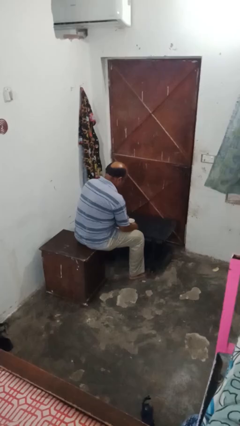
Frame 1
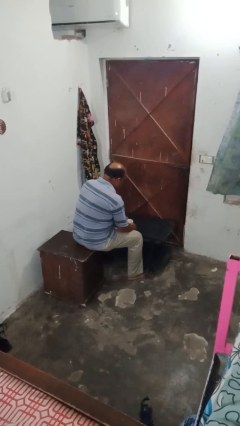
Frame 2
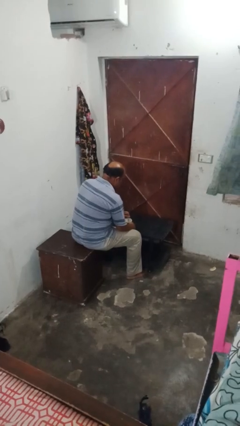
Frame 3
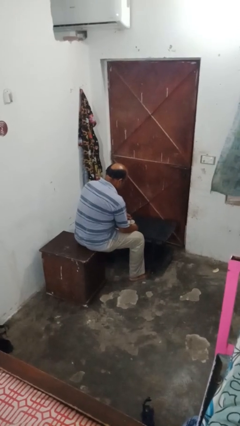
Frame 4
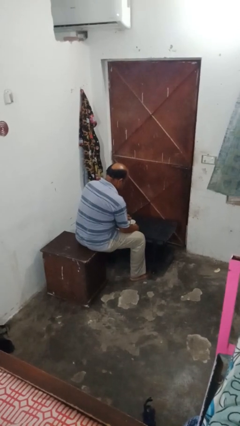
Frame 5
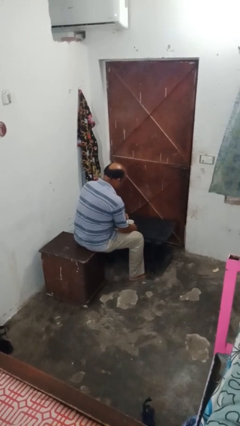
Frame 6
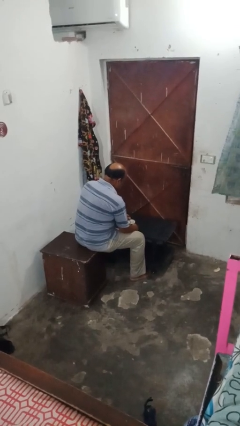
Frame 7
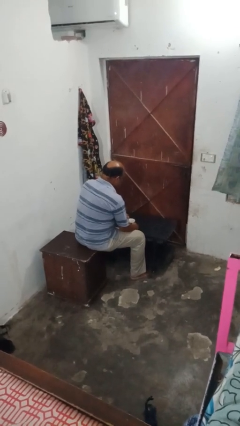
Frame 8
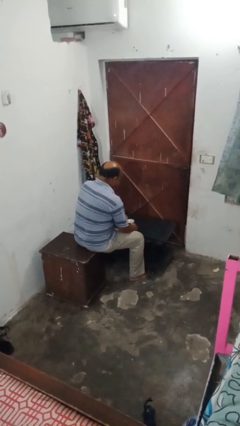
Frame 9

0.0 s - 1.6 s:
person stirs mug

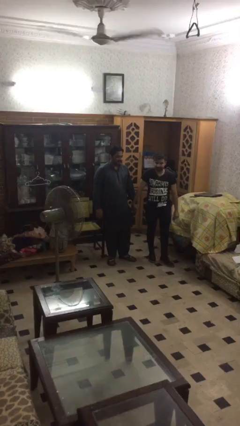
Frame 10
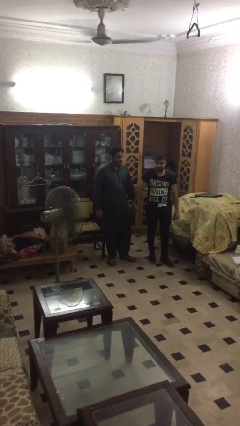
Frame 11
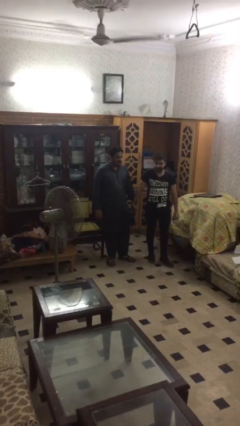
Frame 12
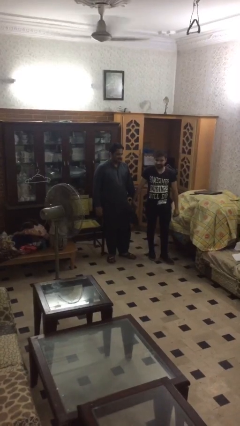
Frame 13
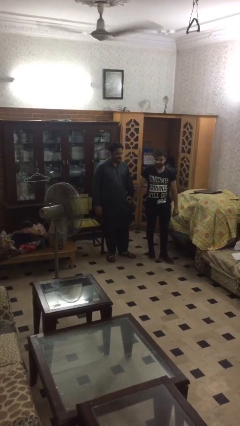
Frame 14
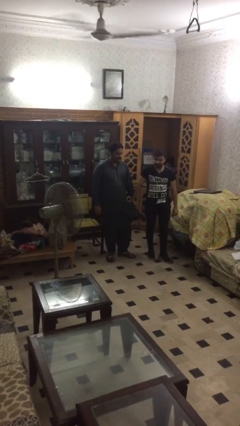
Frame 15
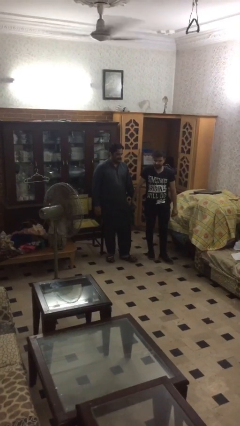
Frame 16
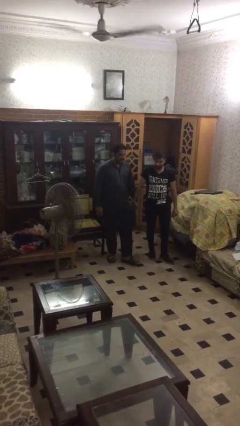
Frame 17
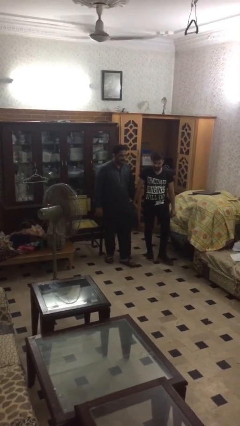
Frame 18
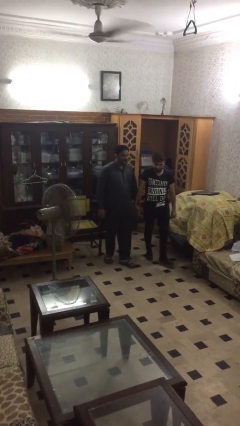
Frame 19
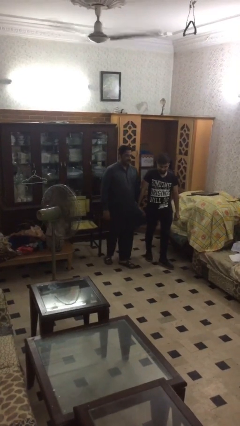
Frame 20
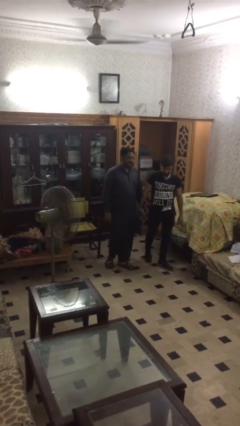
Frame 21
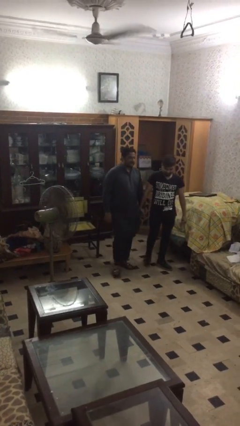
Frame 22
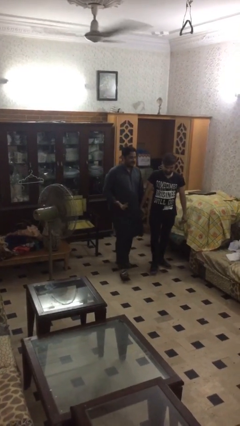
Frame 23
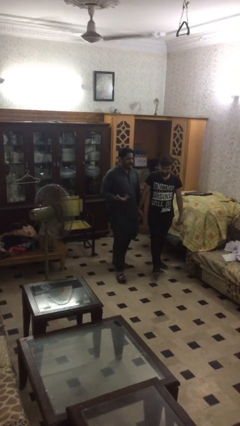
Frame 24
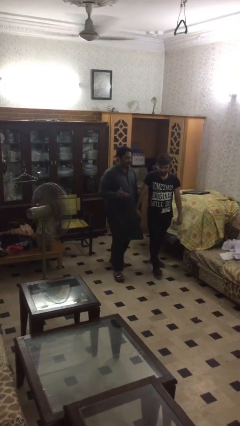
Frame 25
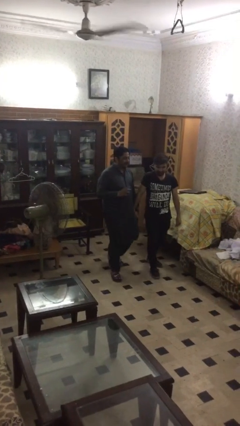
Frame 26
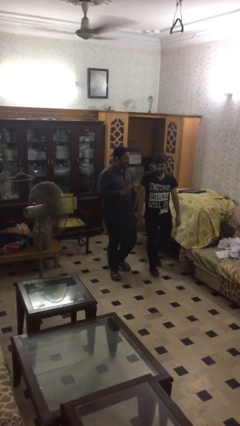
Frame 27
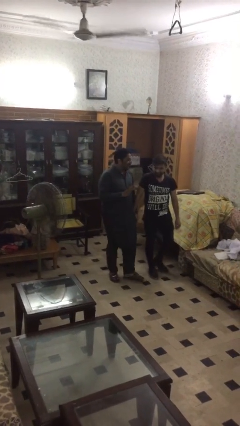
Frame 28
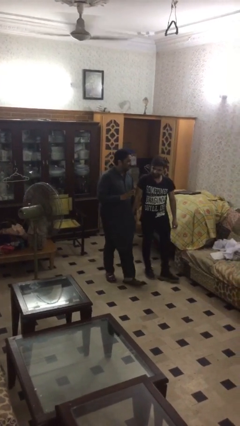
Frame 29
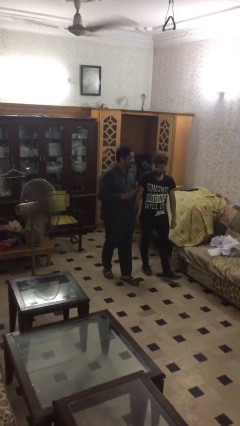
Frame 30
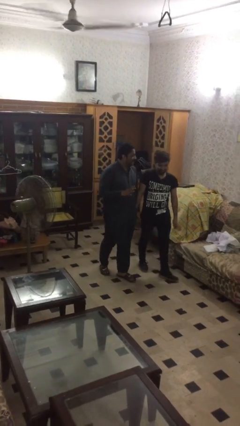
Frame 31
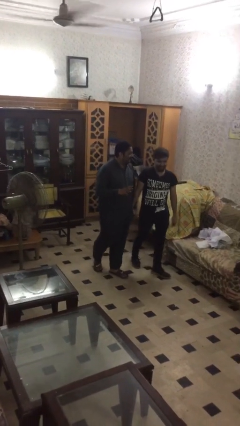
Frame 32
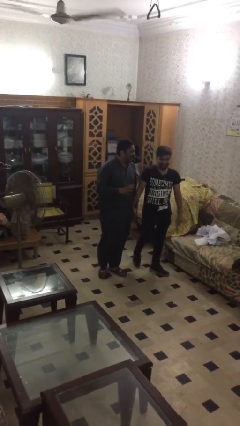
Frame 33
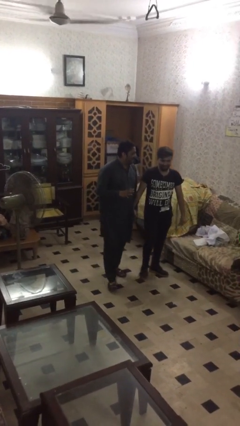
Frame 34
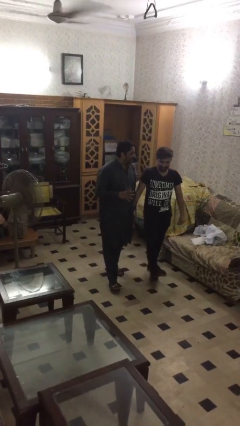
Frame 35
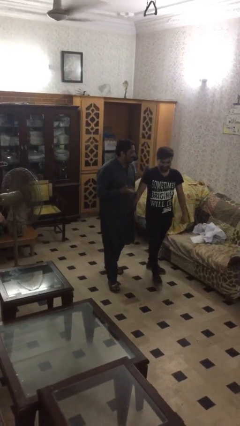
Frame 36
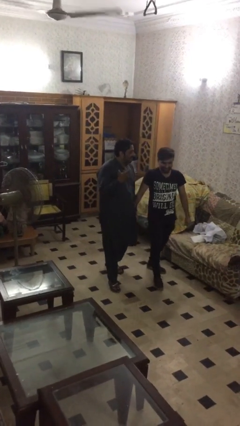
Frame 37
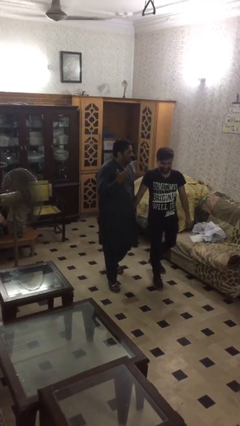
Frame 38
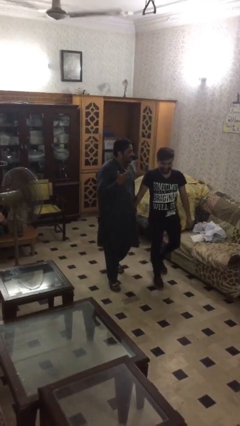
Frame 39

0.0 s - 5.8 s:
person holds hand

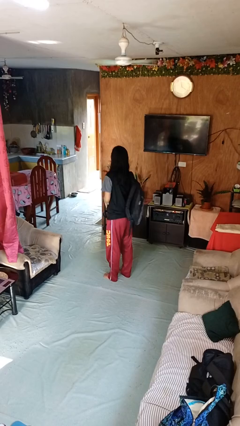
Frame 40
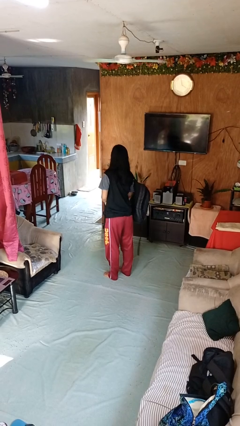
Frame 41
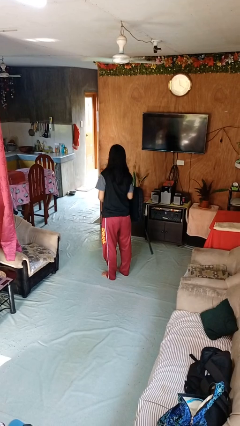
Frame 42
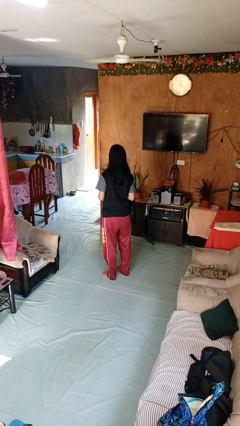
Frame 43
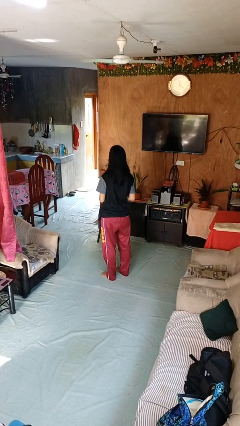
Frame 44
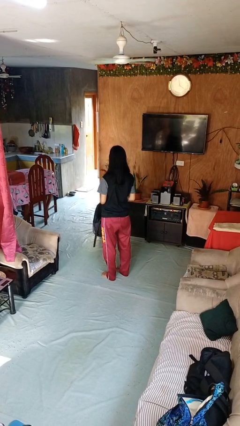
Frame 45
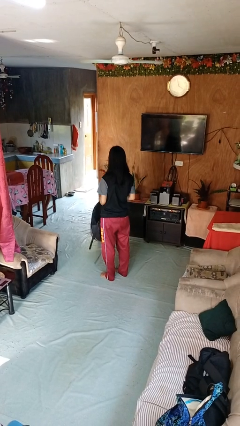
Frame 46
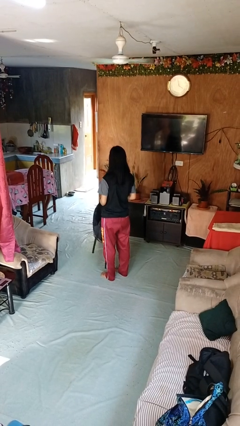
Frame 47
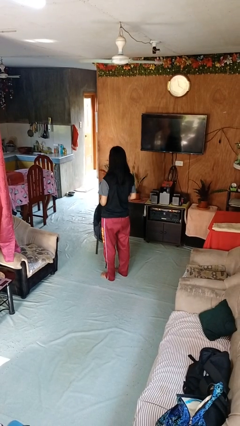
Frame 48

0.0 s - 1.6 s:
person takes off backpack

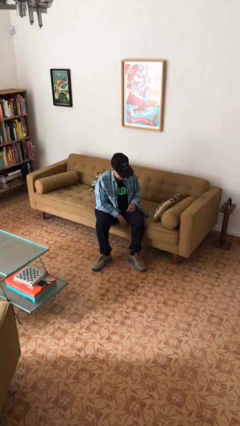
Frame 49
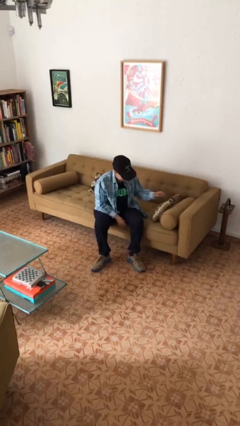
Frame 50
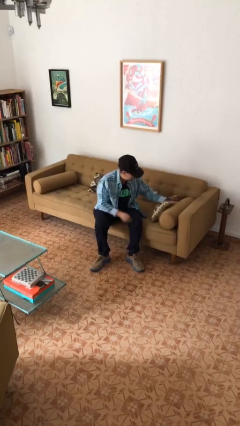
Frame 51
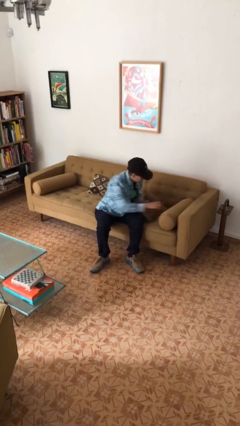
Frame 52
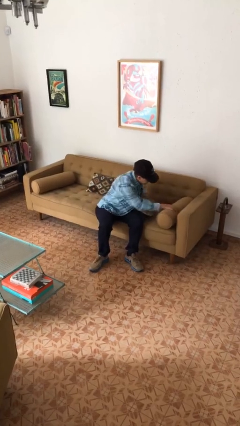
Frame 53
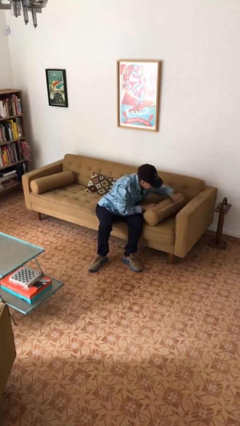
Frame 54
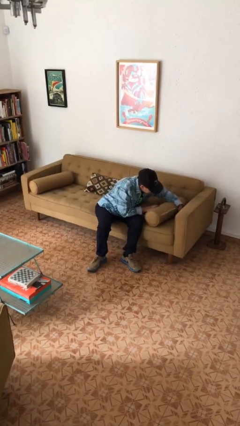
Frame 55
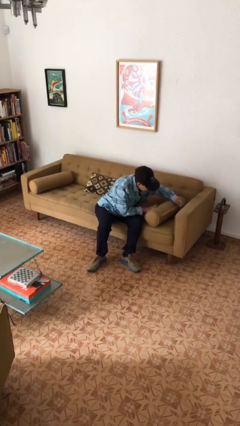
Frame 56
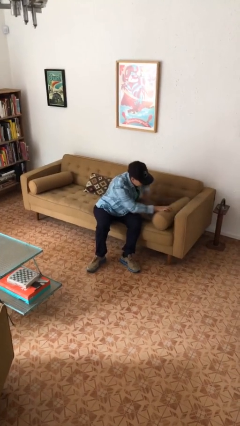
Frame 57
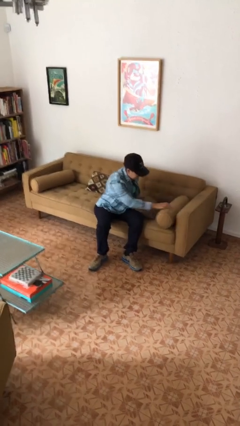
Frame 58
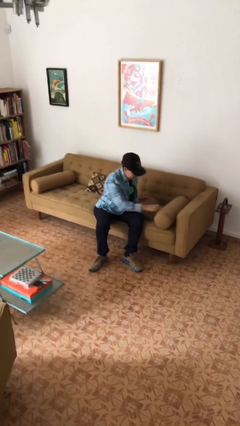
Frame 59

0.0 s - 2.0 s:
person searches in couch

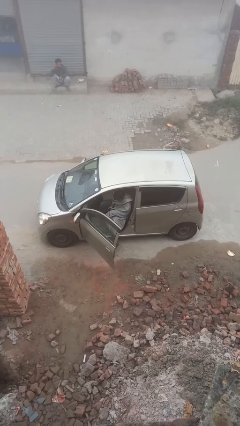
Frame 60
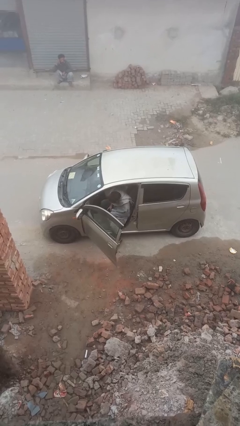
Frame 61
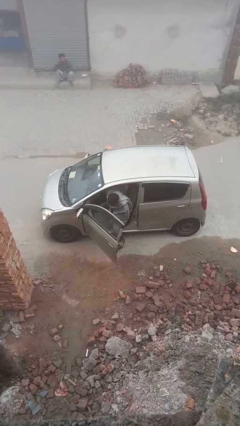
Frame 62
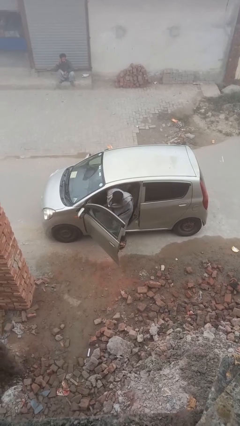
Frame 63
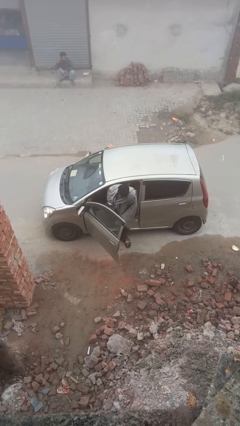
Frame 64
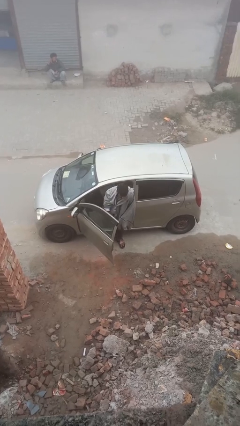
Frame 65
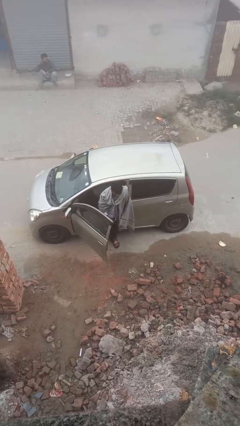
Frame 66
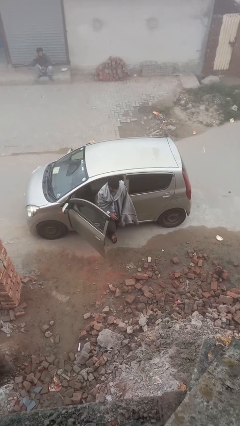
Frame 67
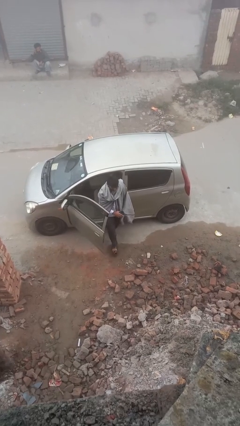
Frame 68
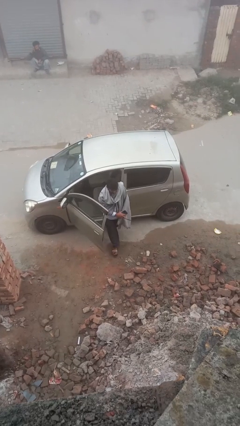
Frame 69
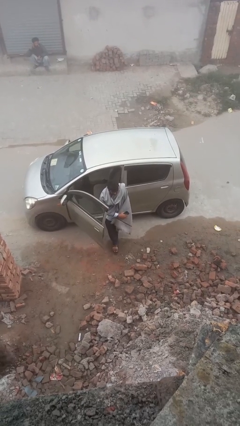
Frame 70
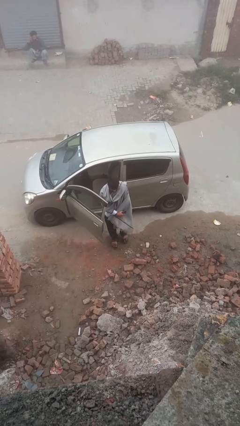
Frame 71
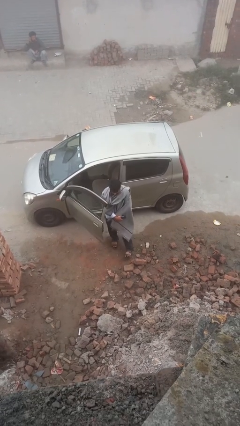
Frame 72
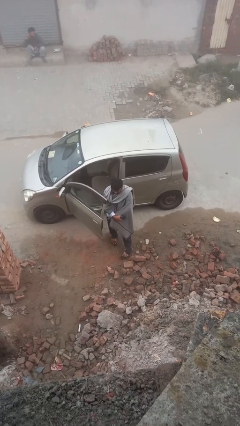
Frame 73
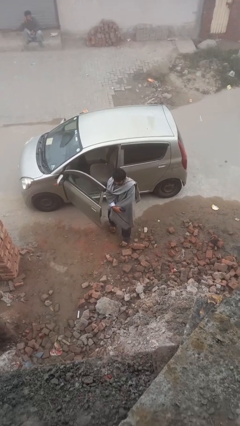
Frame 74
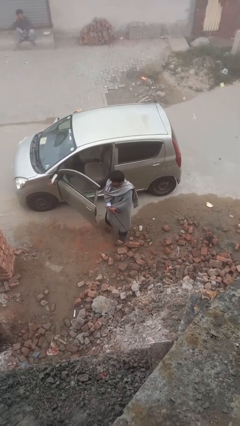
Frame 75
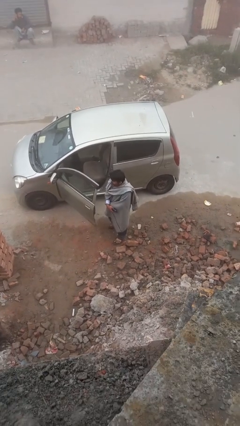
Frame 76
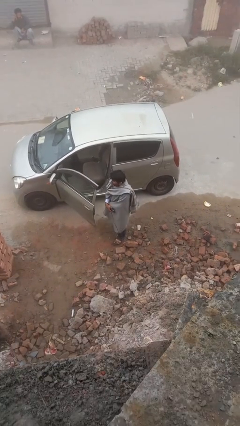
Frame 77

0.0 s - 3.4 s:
person exits car

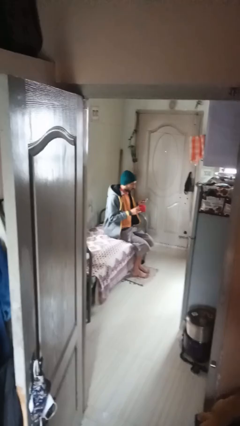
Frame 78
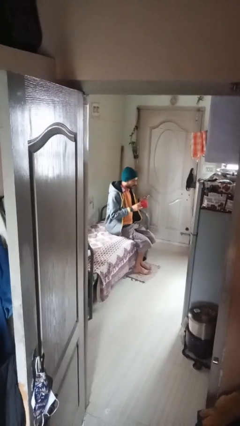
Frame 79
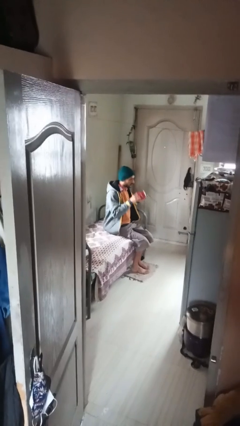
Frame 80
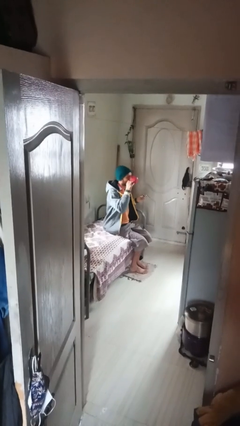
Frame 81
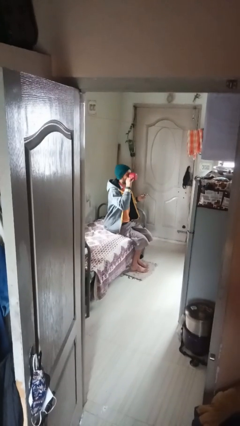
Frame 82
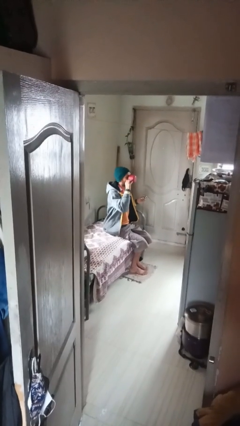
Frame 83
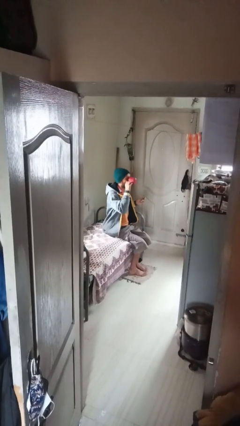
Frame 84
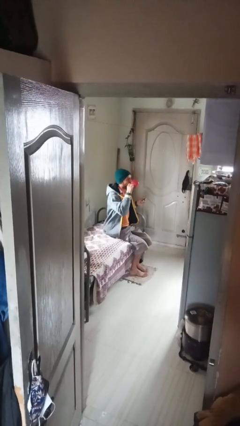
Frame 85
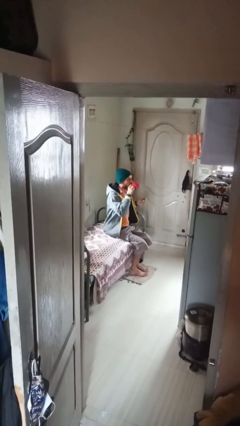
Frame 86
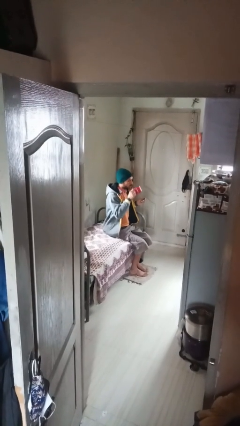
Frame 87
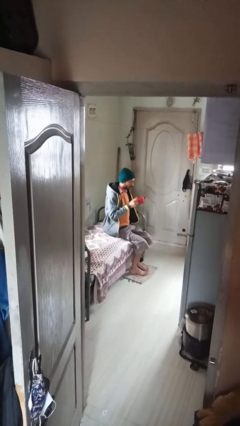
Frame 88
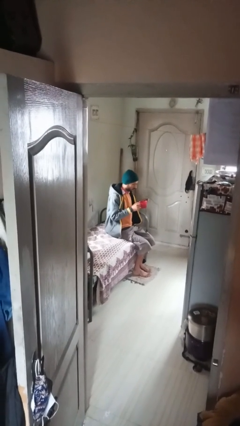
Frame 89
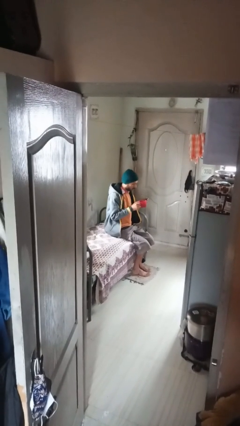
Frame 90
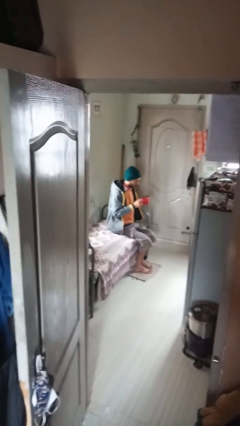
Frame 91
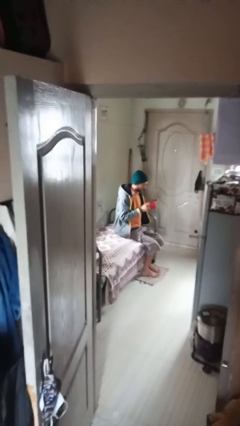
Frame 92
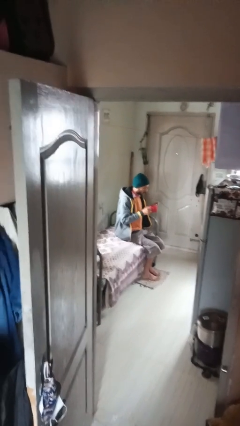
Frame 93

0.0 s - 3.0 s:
person drinks from mug
